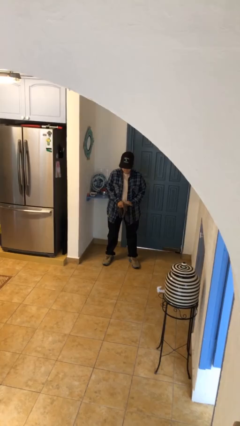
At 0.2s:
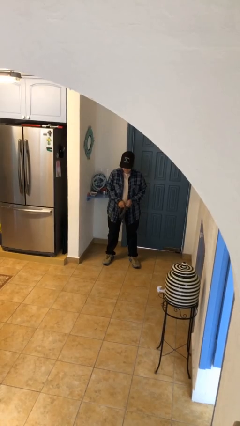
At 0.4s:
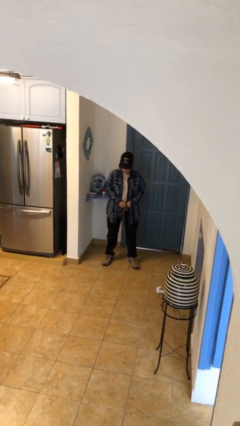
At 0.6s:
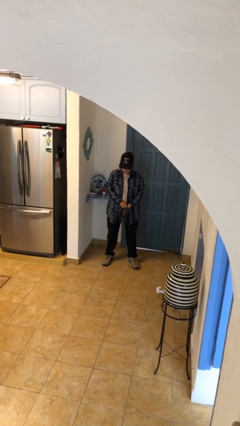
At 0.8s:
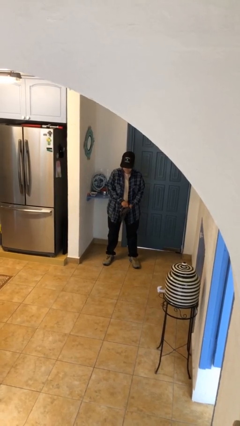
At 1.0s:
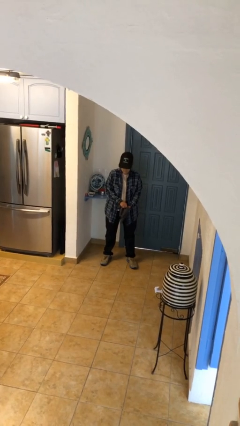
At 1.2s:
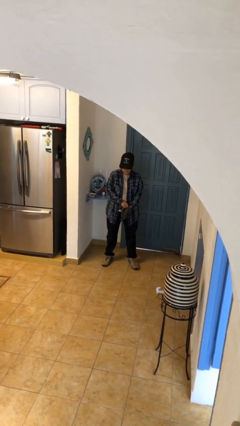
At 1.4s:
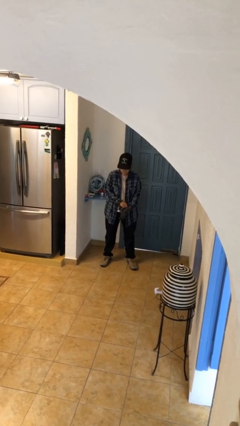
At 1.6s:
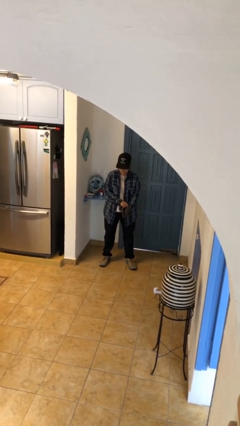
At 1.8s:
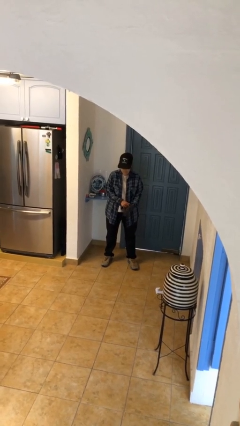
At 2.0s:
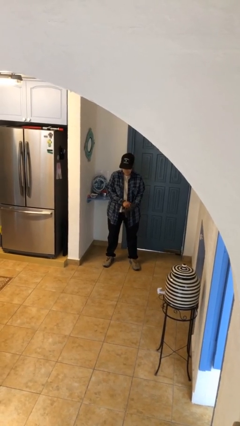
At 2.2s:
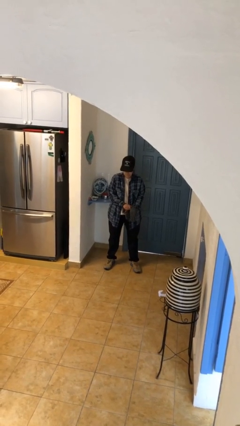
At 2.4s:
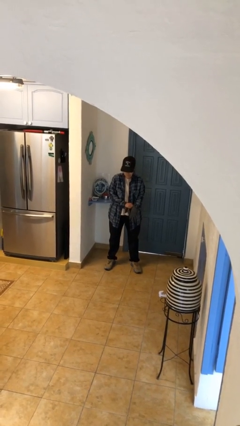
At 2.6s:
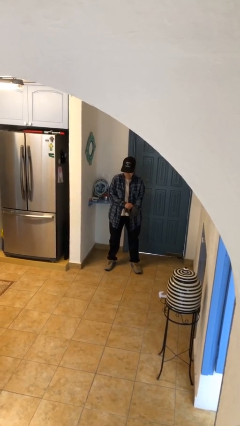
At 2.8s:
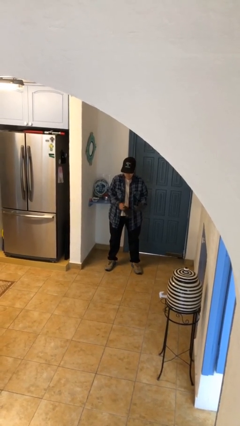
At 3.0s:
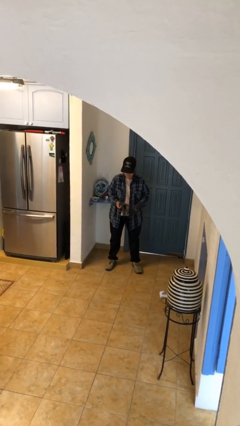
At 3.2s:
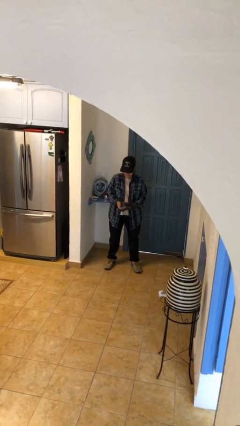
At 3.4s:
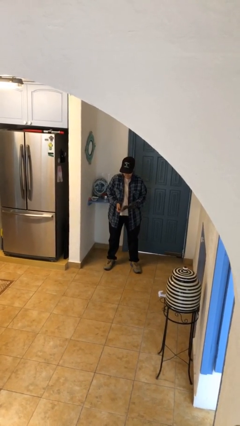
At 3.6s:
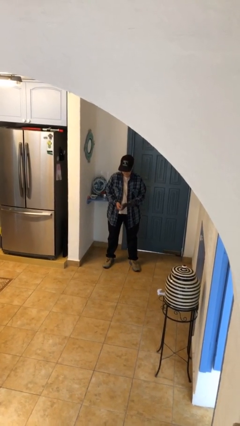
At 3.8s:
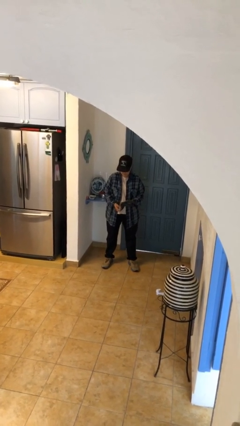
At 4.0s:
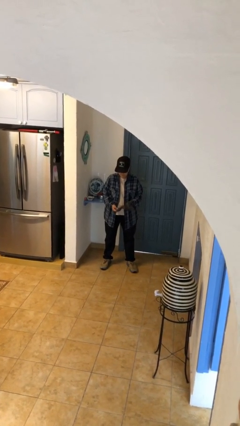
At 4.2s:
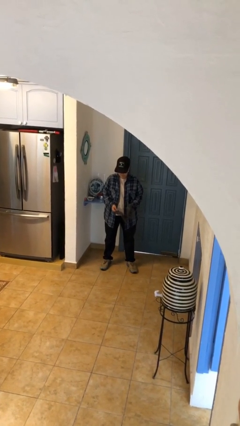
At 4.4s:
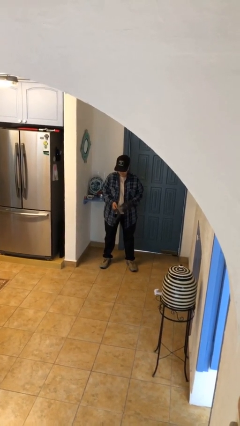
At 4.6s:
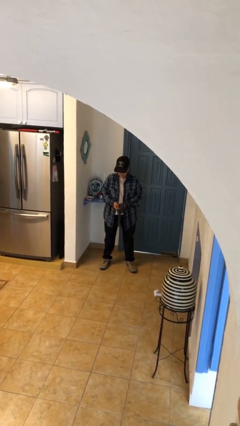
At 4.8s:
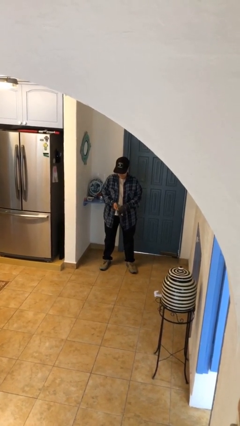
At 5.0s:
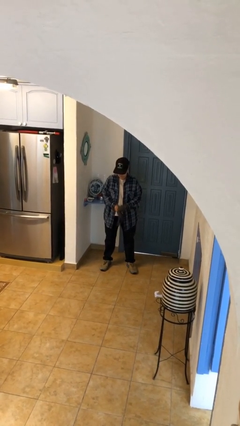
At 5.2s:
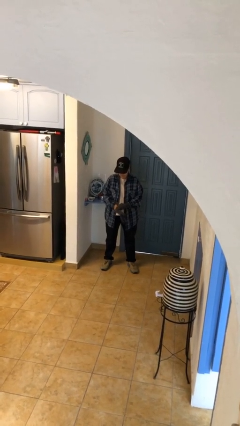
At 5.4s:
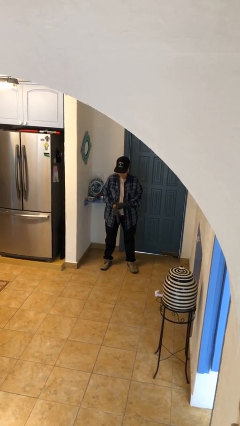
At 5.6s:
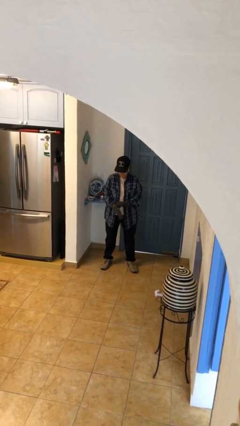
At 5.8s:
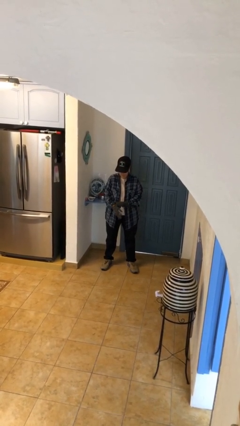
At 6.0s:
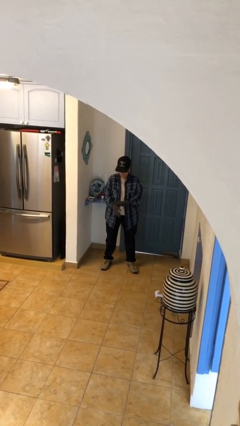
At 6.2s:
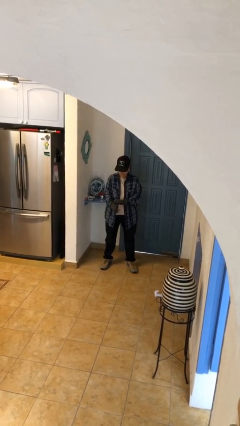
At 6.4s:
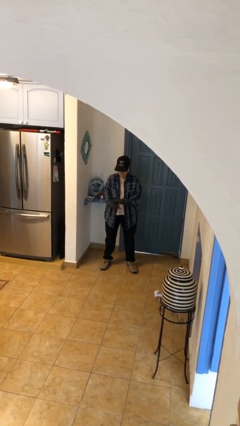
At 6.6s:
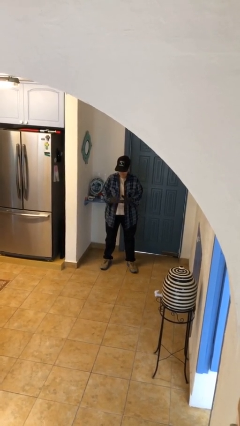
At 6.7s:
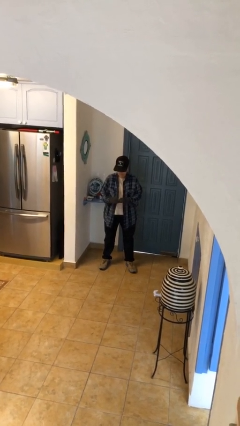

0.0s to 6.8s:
person puts on gloves

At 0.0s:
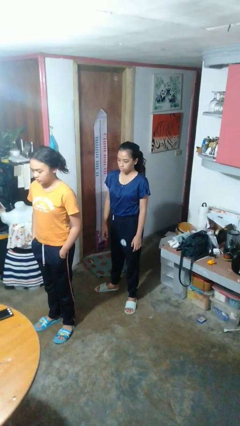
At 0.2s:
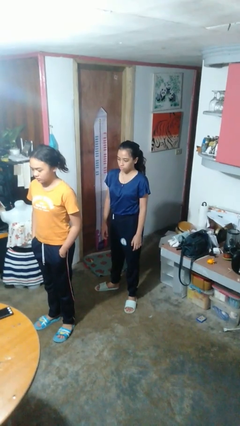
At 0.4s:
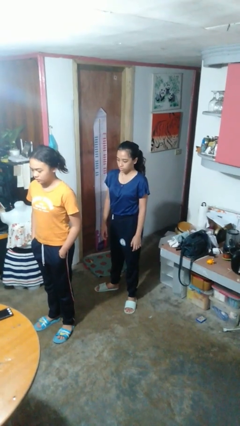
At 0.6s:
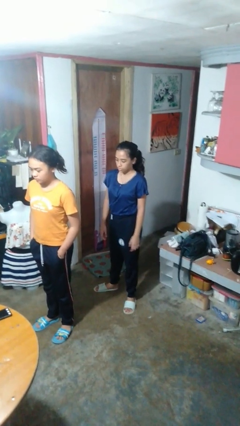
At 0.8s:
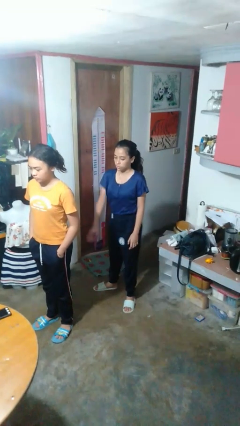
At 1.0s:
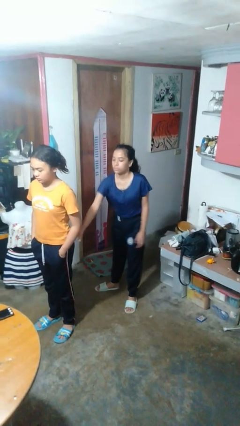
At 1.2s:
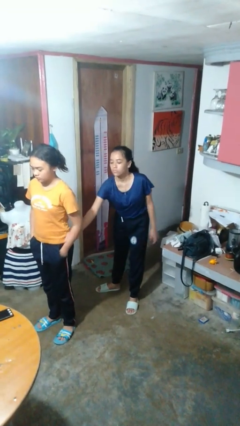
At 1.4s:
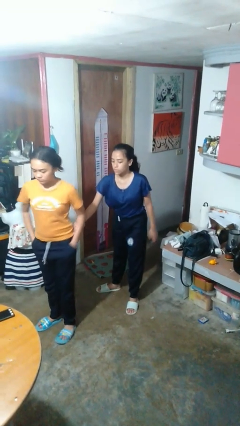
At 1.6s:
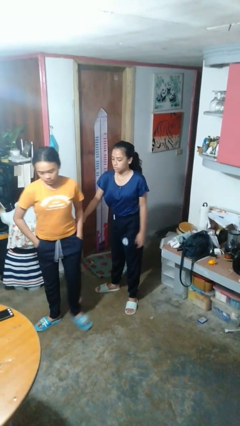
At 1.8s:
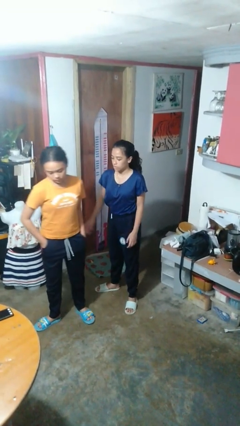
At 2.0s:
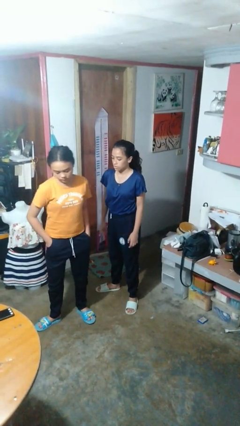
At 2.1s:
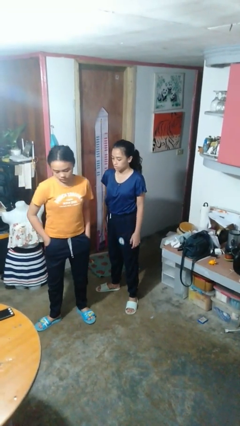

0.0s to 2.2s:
person grabs person by forearm

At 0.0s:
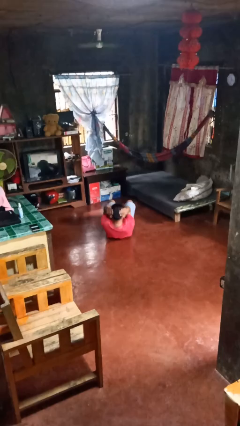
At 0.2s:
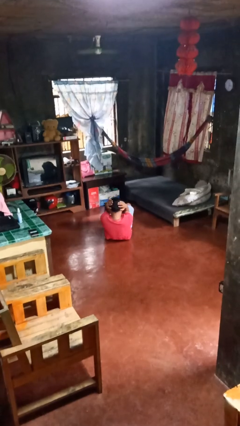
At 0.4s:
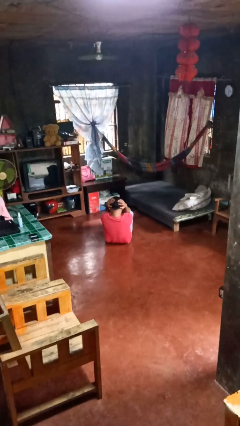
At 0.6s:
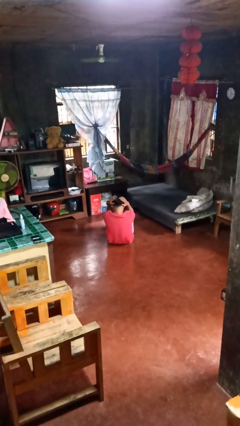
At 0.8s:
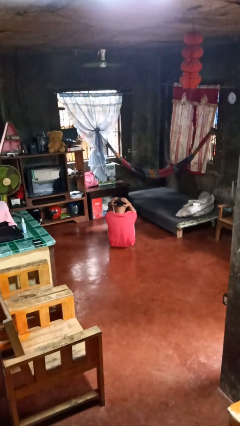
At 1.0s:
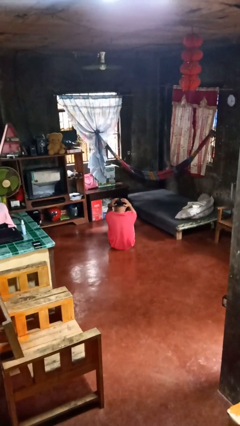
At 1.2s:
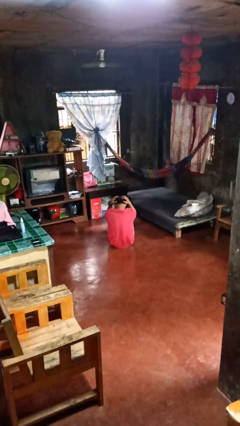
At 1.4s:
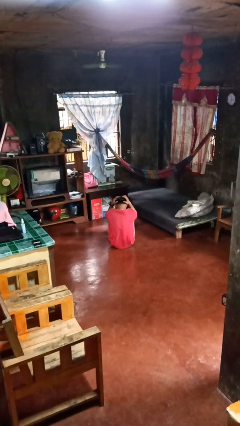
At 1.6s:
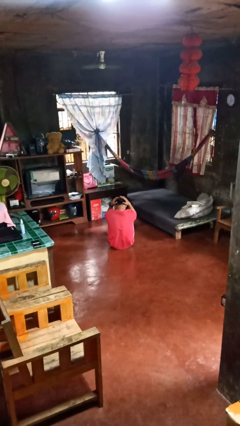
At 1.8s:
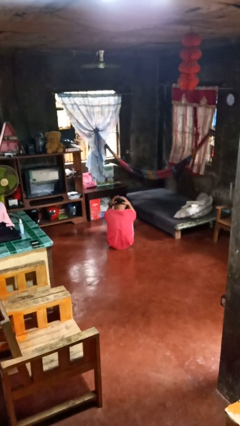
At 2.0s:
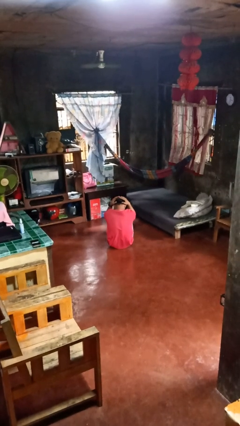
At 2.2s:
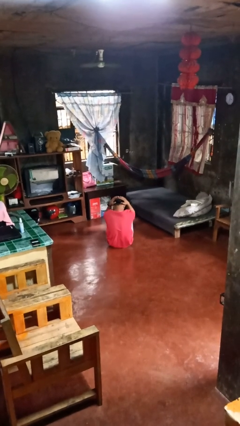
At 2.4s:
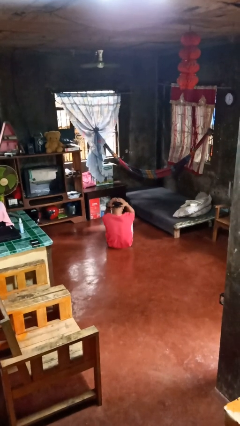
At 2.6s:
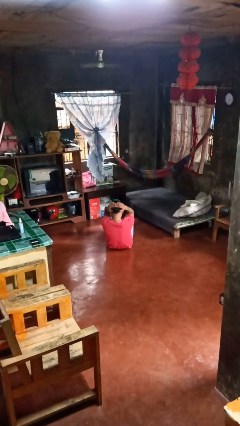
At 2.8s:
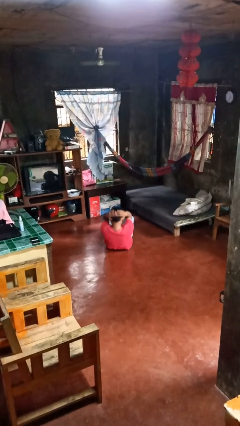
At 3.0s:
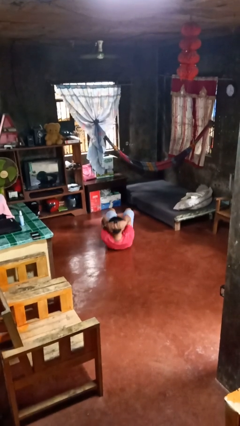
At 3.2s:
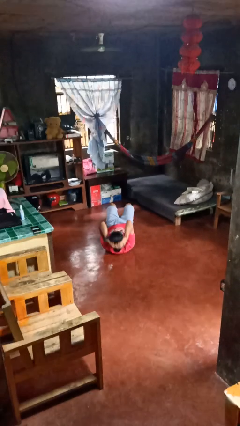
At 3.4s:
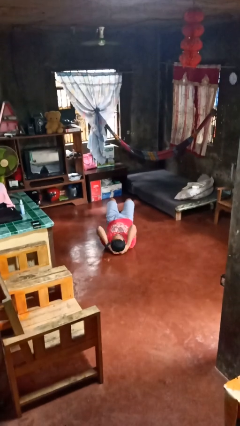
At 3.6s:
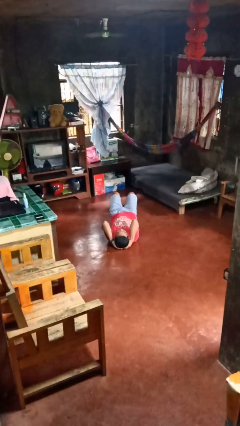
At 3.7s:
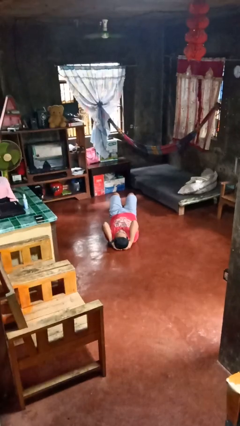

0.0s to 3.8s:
person exercises with situp

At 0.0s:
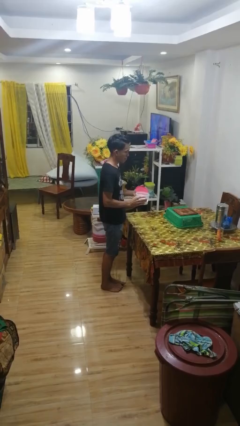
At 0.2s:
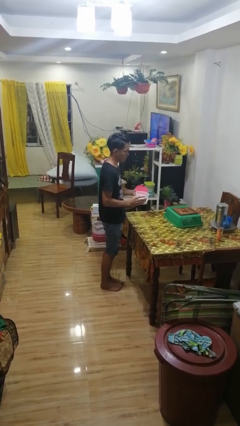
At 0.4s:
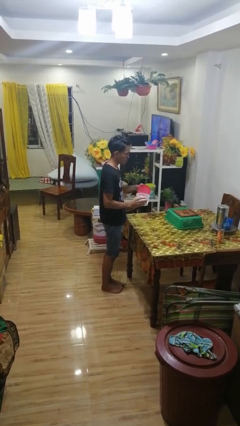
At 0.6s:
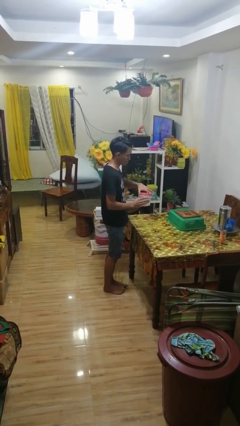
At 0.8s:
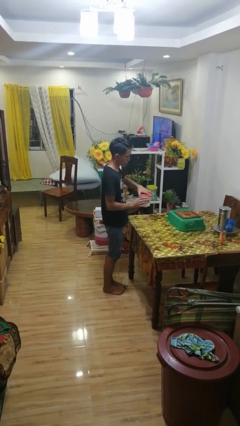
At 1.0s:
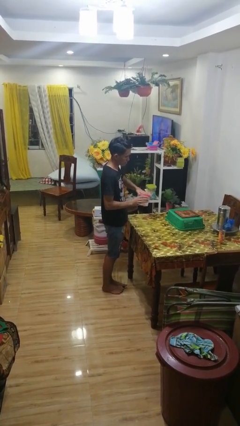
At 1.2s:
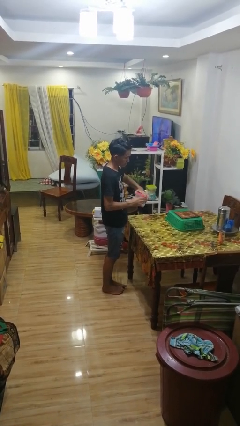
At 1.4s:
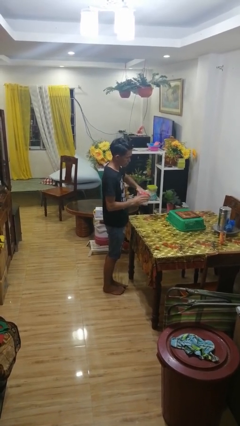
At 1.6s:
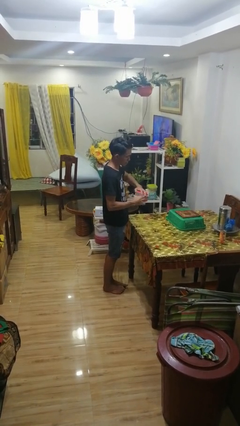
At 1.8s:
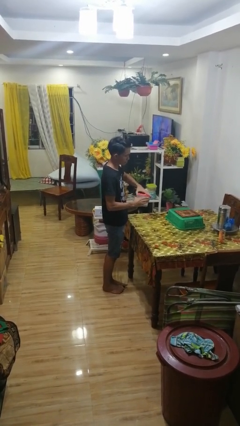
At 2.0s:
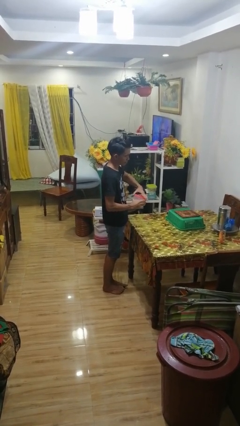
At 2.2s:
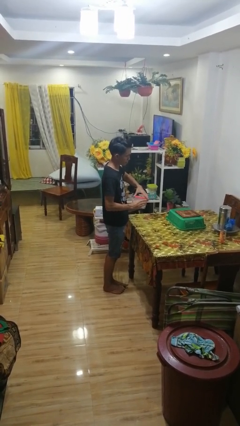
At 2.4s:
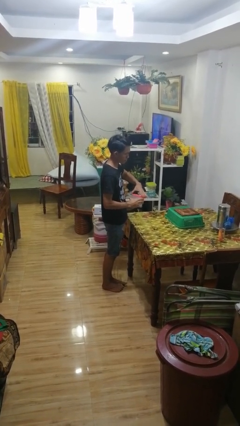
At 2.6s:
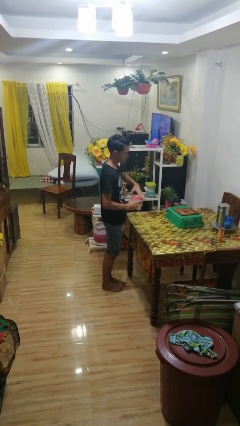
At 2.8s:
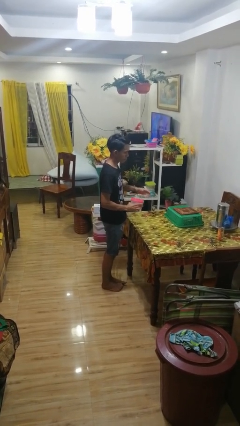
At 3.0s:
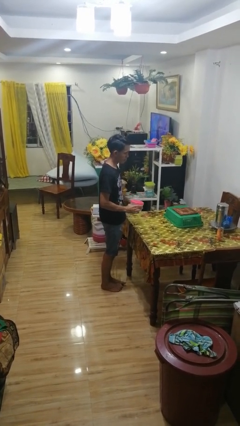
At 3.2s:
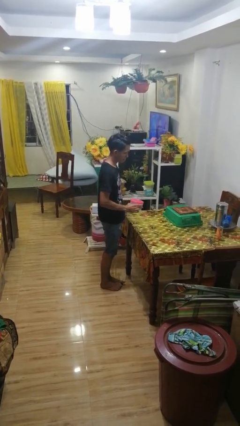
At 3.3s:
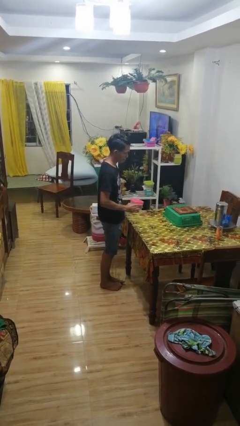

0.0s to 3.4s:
person closes jar

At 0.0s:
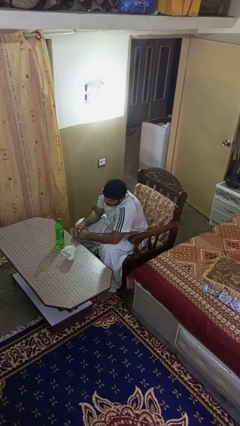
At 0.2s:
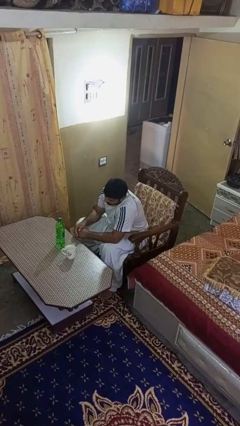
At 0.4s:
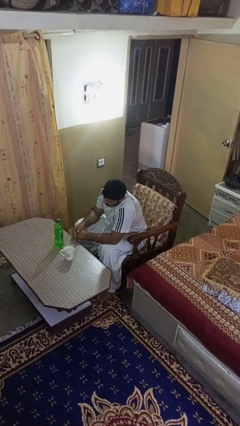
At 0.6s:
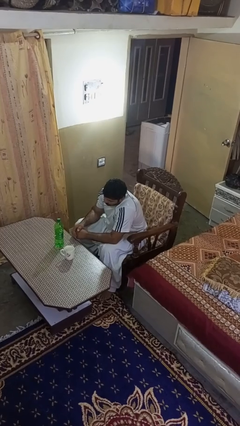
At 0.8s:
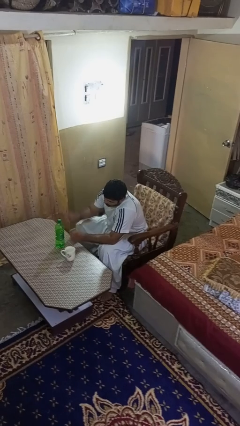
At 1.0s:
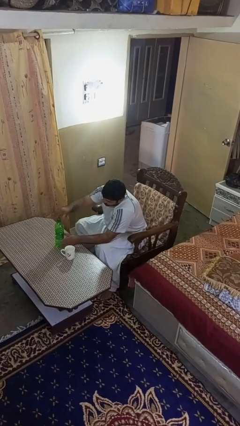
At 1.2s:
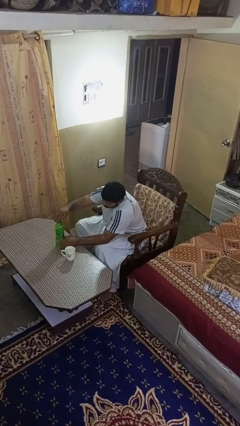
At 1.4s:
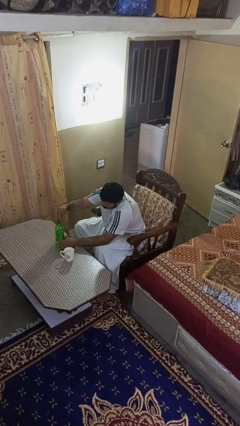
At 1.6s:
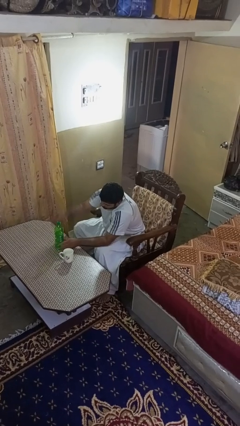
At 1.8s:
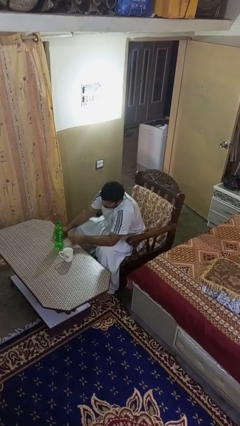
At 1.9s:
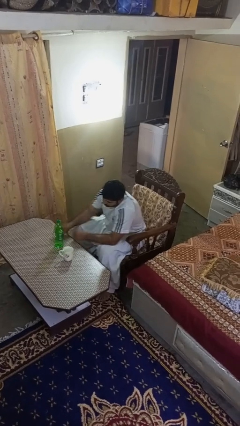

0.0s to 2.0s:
person unscrews lid from bottle
